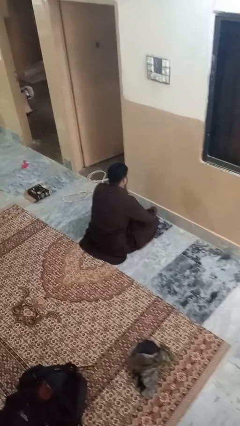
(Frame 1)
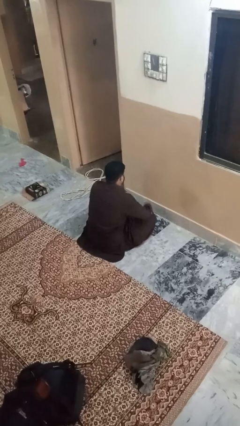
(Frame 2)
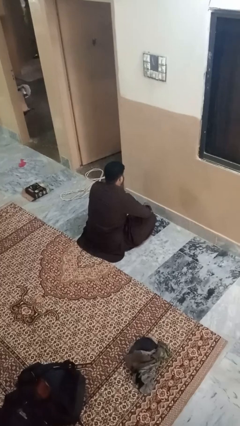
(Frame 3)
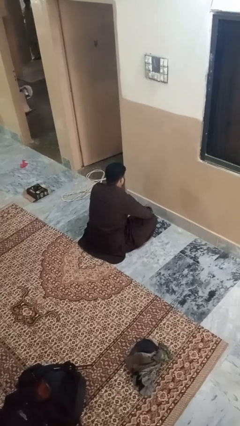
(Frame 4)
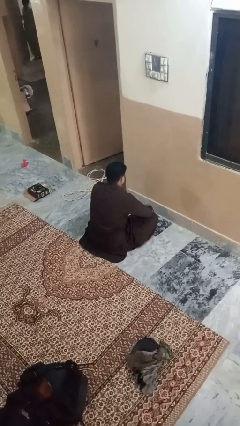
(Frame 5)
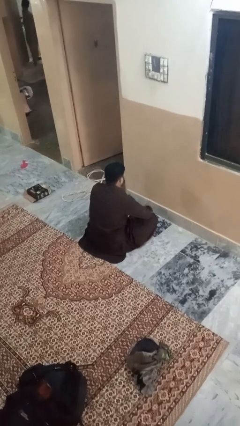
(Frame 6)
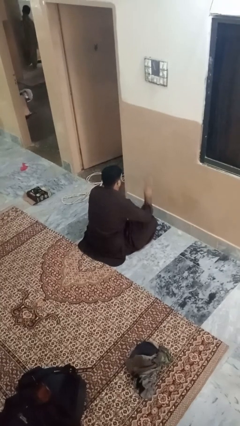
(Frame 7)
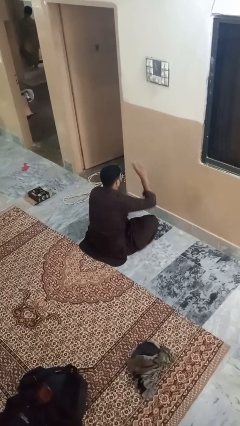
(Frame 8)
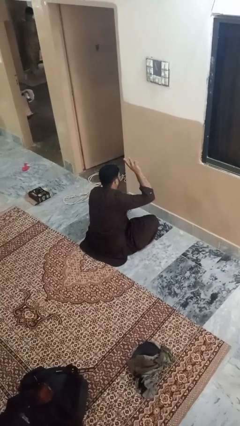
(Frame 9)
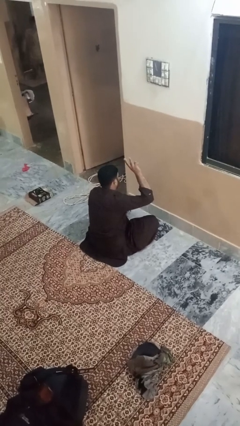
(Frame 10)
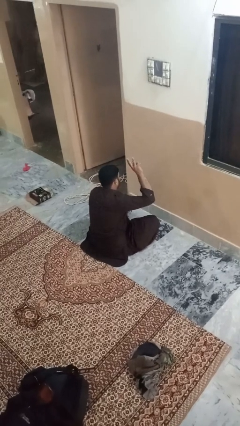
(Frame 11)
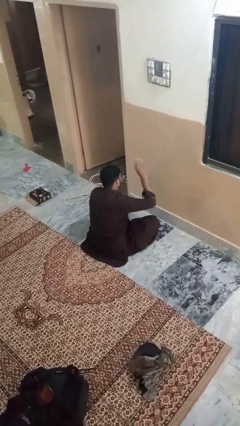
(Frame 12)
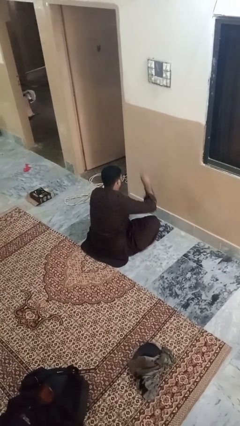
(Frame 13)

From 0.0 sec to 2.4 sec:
person gestures number three

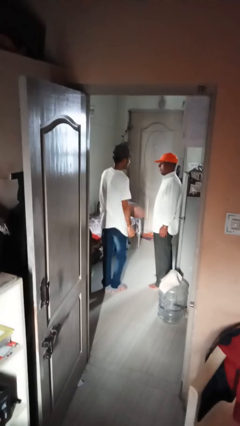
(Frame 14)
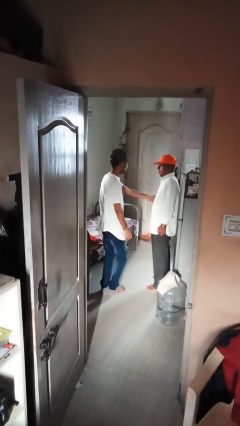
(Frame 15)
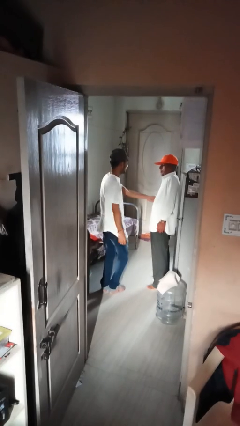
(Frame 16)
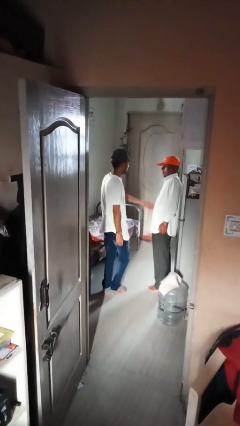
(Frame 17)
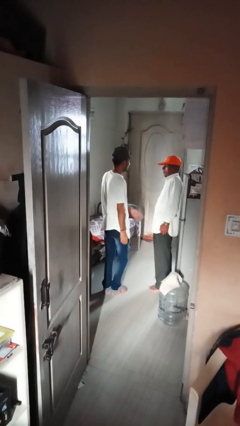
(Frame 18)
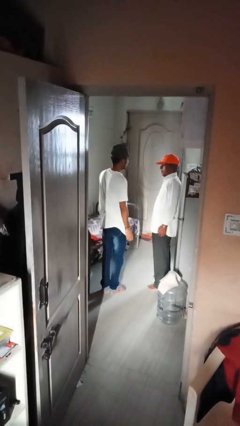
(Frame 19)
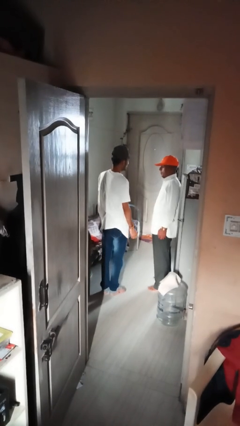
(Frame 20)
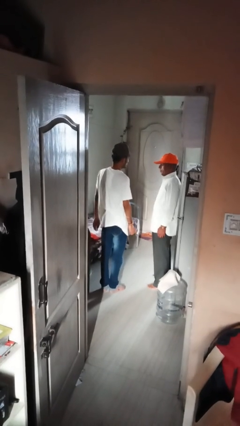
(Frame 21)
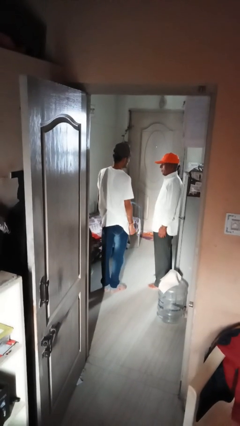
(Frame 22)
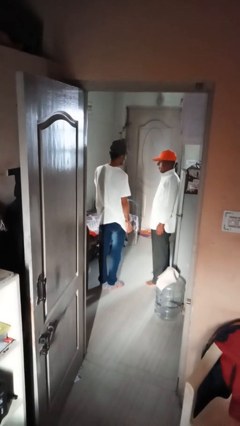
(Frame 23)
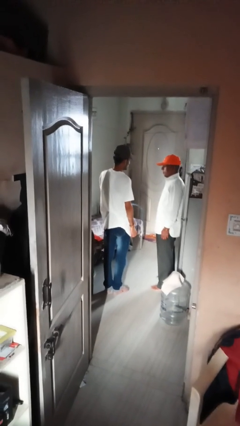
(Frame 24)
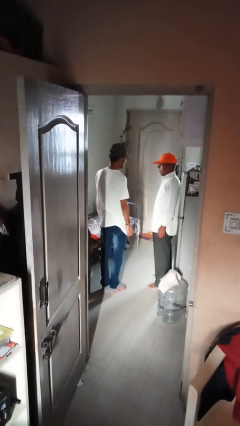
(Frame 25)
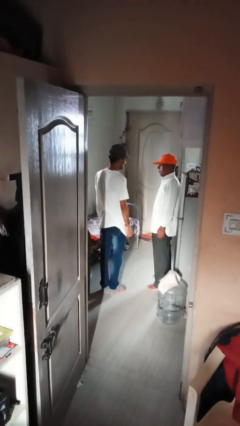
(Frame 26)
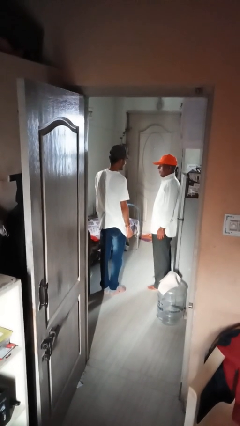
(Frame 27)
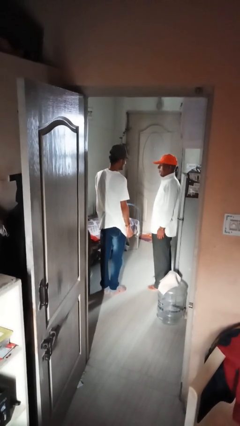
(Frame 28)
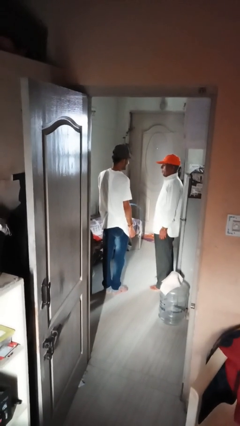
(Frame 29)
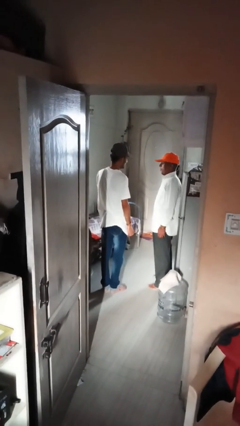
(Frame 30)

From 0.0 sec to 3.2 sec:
person tickles person

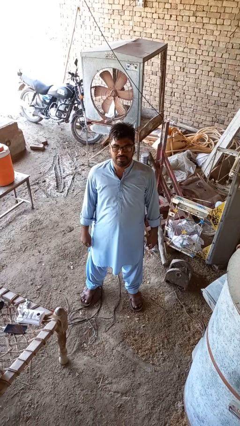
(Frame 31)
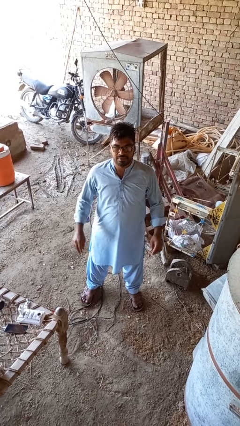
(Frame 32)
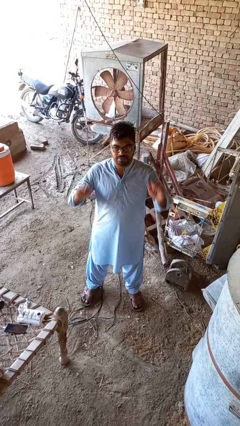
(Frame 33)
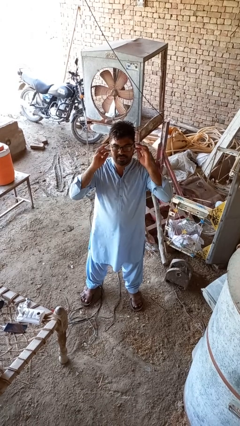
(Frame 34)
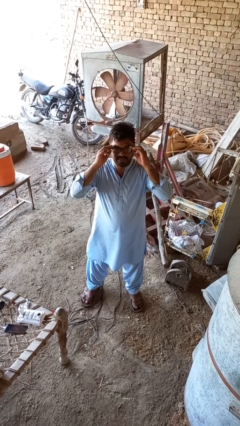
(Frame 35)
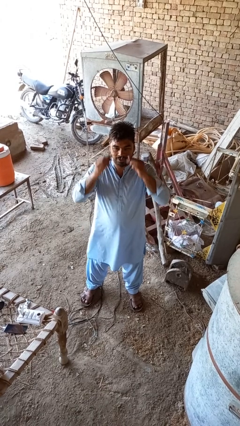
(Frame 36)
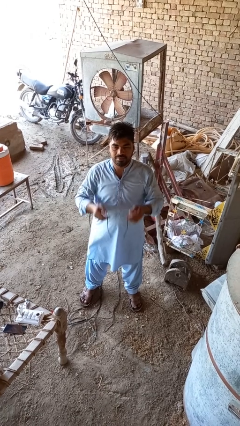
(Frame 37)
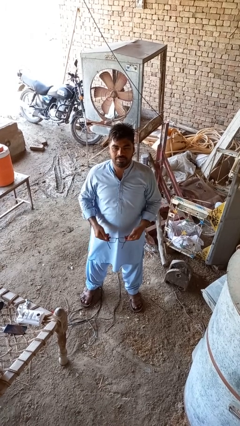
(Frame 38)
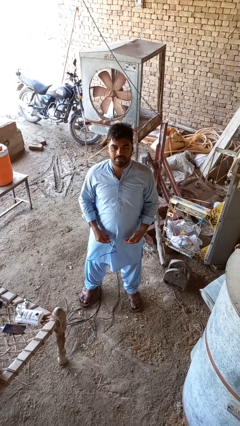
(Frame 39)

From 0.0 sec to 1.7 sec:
person takes off glasses

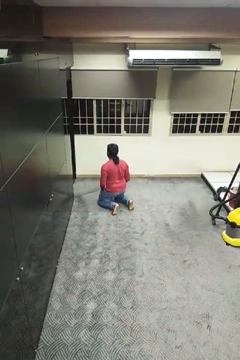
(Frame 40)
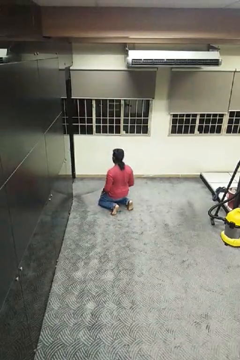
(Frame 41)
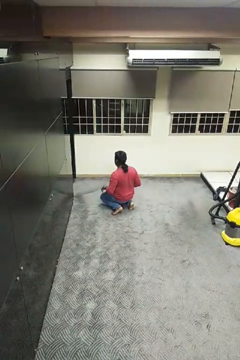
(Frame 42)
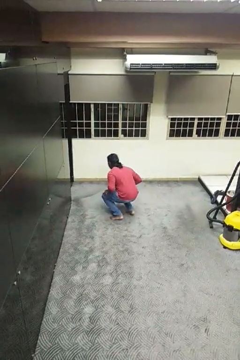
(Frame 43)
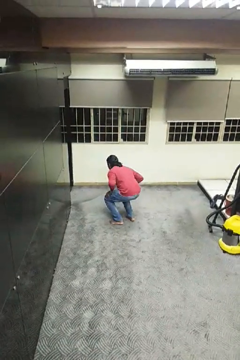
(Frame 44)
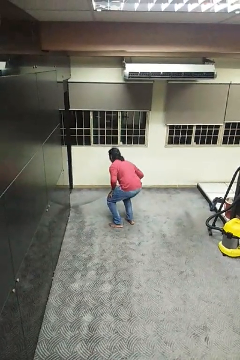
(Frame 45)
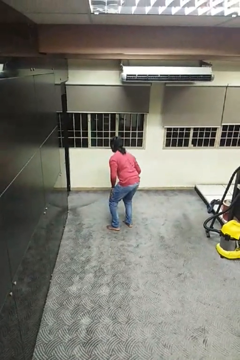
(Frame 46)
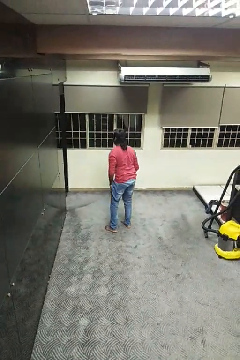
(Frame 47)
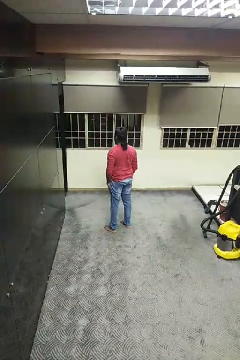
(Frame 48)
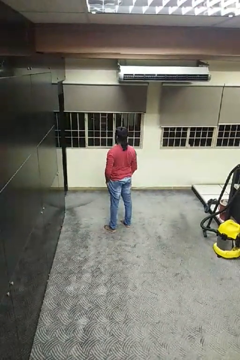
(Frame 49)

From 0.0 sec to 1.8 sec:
person stands up from floor

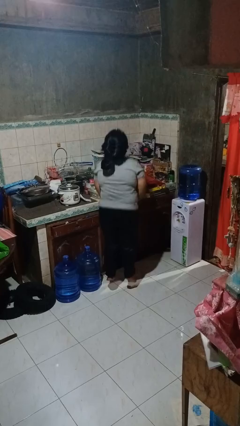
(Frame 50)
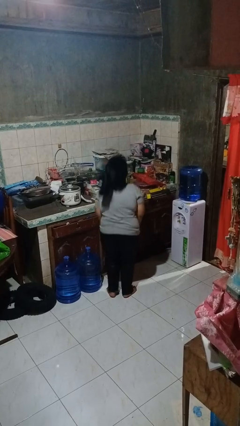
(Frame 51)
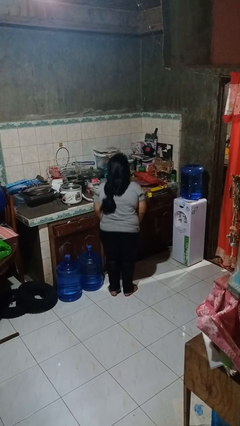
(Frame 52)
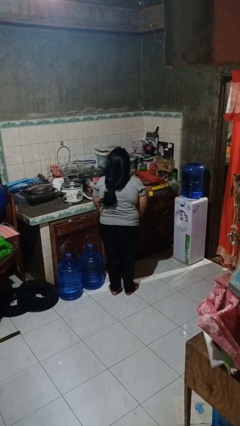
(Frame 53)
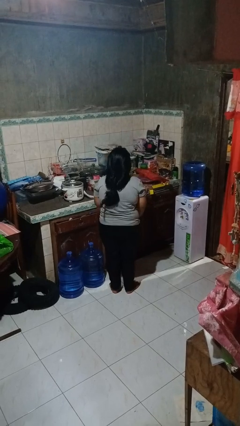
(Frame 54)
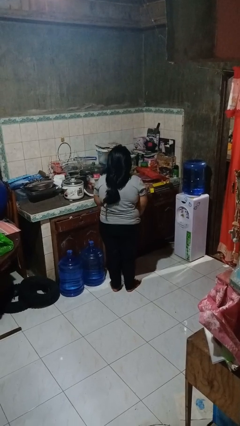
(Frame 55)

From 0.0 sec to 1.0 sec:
person jumps

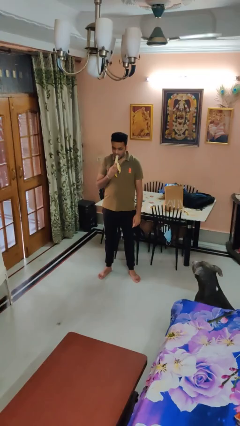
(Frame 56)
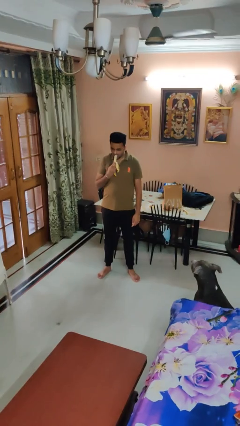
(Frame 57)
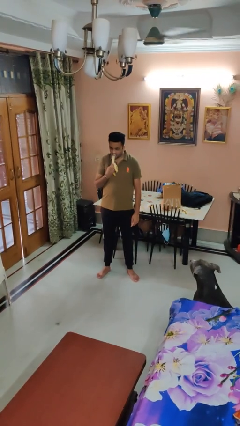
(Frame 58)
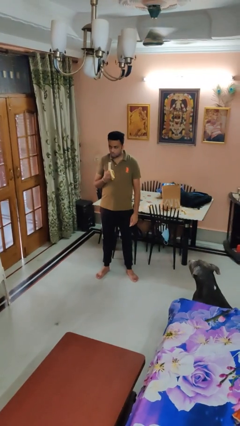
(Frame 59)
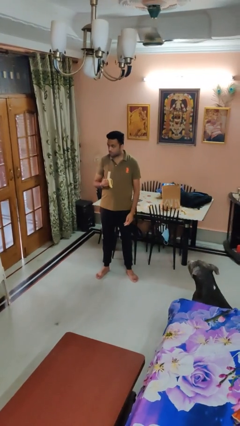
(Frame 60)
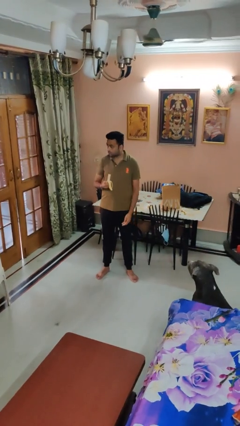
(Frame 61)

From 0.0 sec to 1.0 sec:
person eats banana

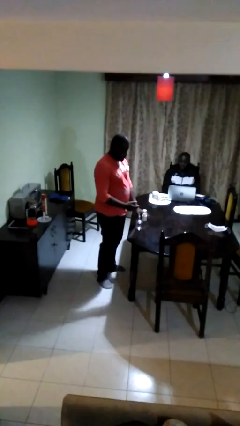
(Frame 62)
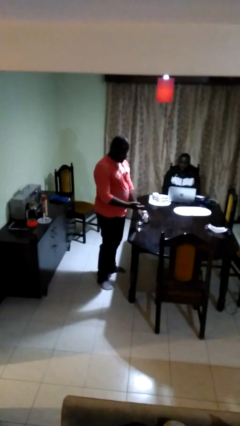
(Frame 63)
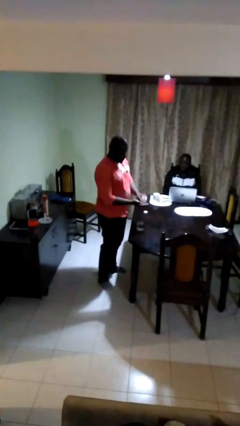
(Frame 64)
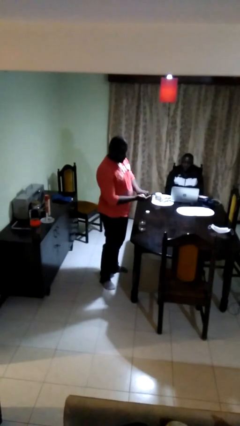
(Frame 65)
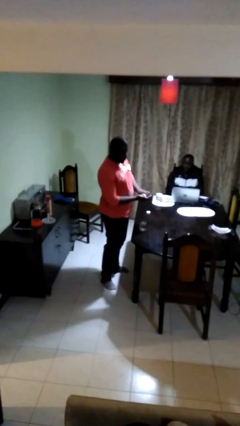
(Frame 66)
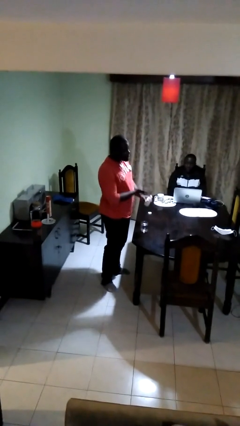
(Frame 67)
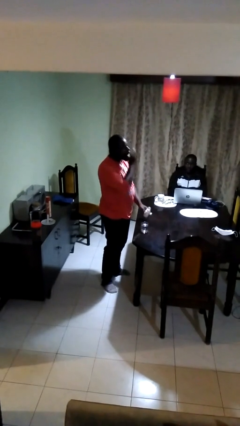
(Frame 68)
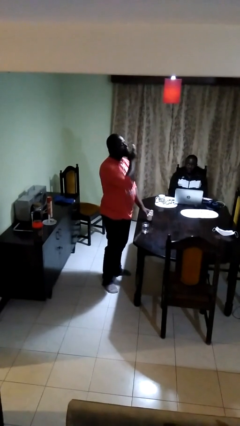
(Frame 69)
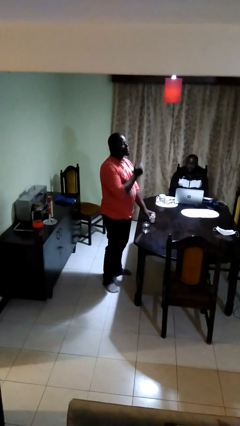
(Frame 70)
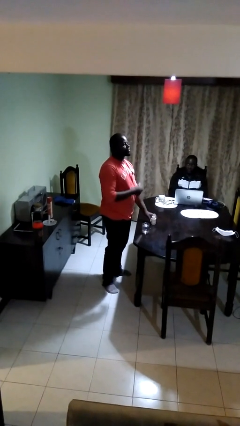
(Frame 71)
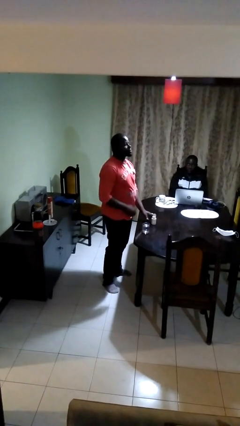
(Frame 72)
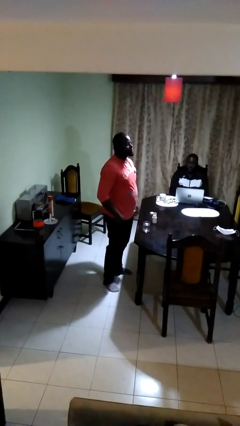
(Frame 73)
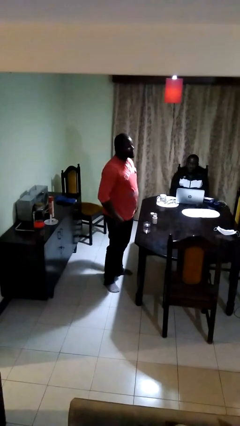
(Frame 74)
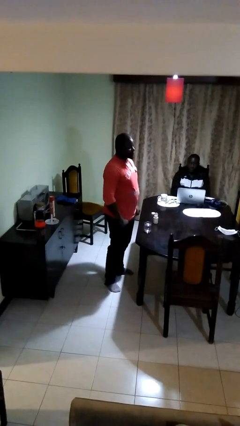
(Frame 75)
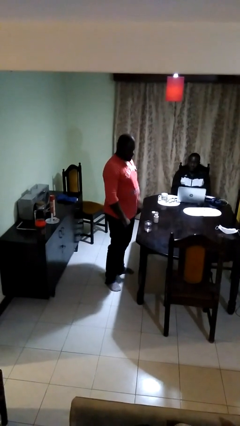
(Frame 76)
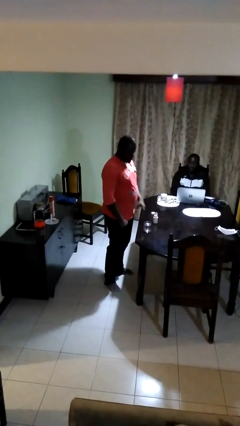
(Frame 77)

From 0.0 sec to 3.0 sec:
person takes medicine pills

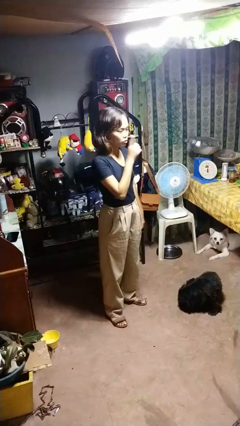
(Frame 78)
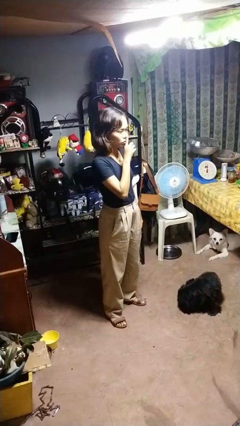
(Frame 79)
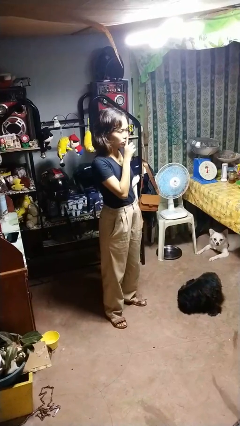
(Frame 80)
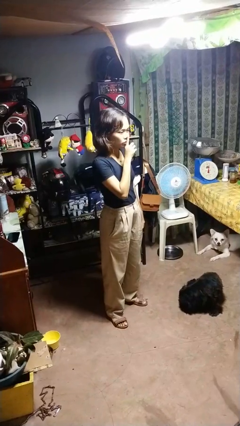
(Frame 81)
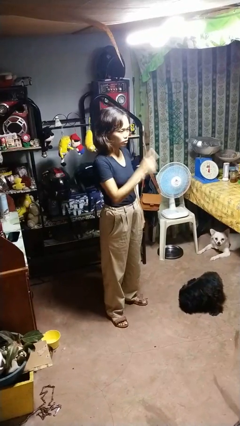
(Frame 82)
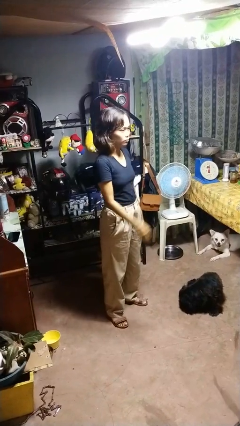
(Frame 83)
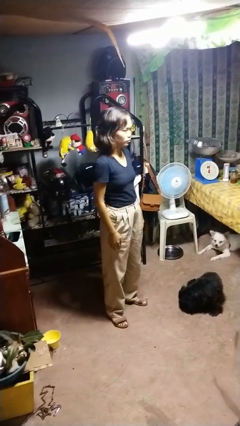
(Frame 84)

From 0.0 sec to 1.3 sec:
person gestures be quiet

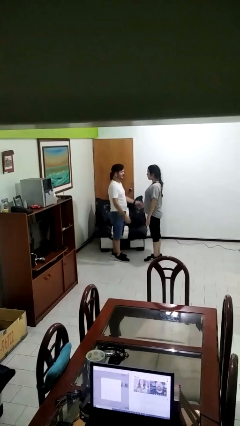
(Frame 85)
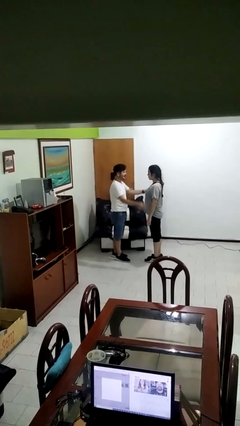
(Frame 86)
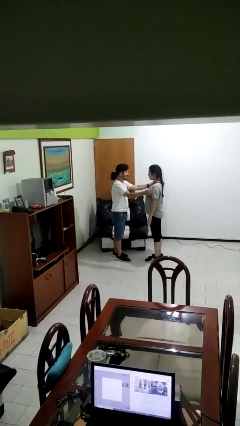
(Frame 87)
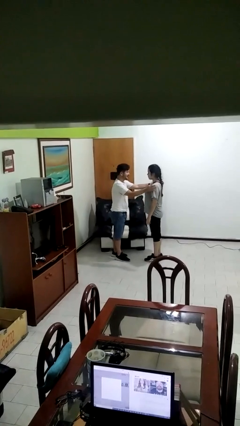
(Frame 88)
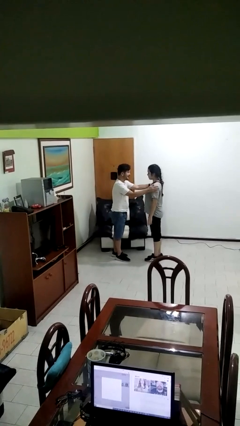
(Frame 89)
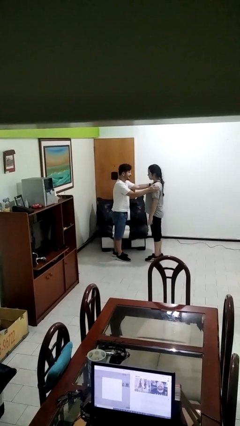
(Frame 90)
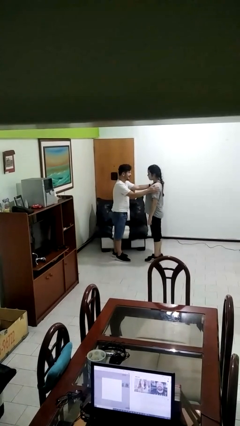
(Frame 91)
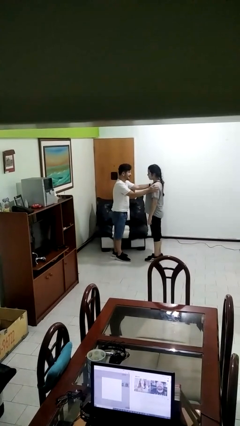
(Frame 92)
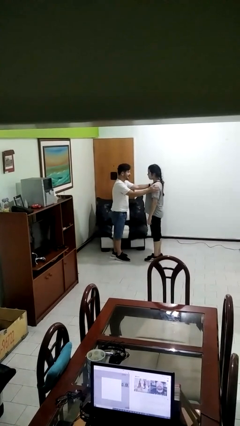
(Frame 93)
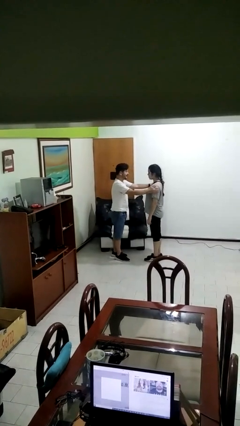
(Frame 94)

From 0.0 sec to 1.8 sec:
person pounds shoulders of person
